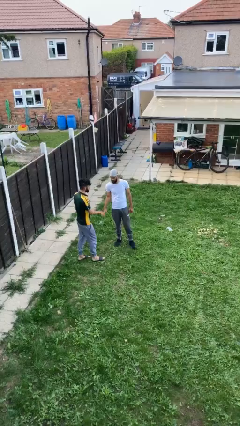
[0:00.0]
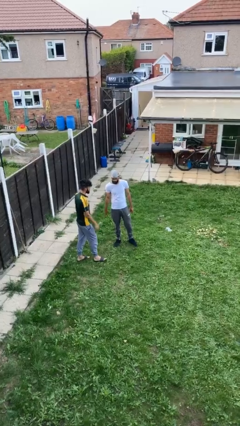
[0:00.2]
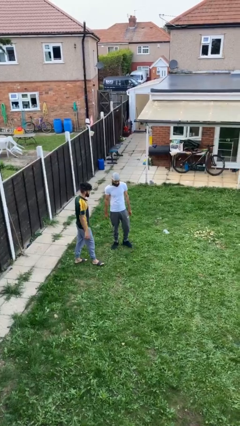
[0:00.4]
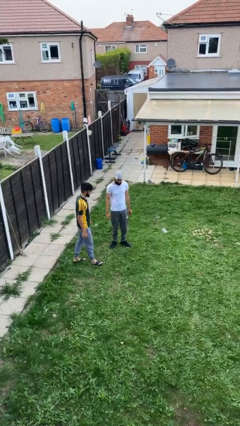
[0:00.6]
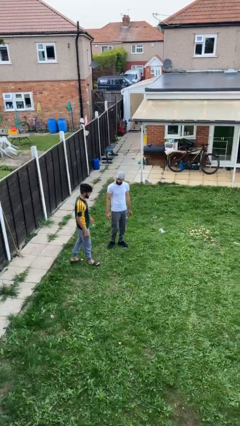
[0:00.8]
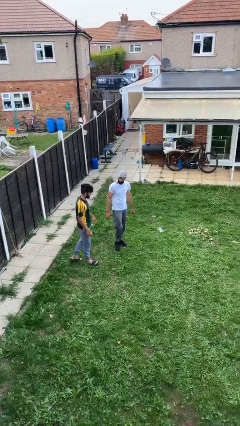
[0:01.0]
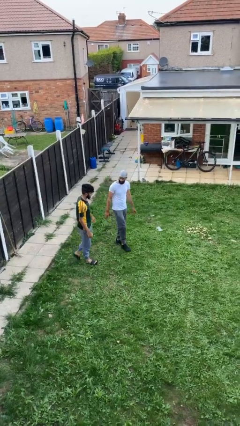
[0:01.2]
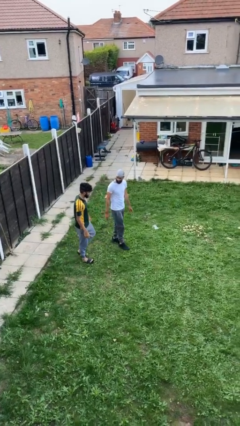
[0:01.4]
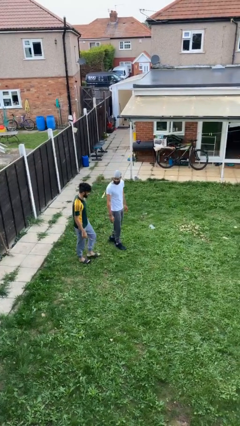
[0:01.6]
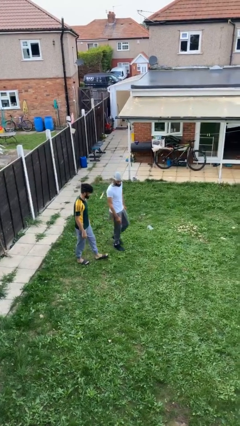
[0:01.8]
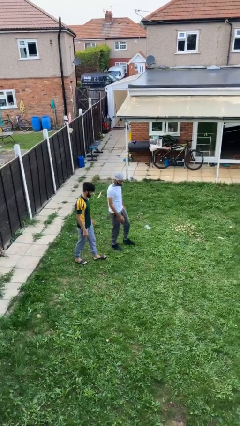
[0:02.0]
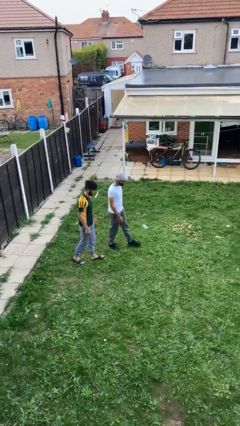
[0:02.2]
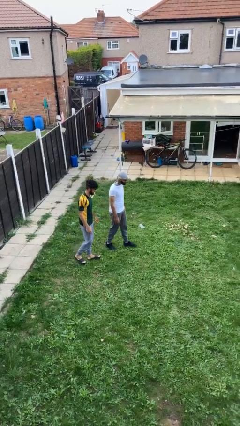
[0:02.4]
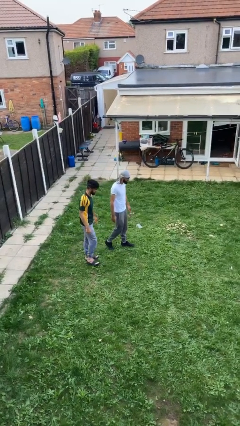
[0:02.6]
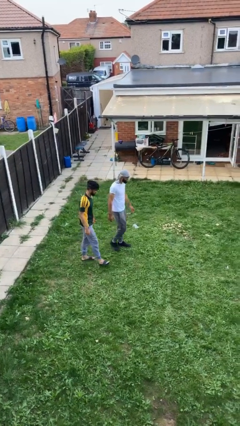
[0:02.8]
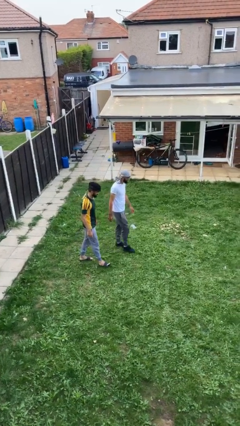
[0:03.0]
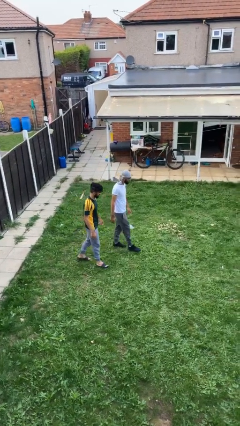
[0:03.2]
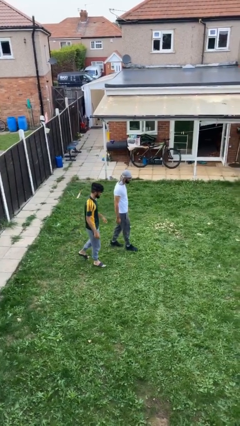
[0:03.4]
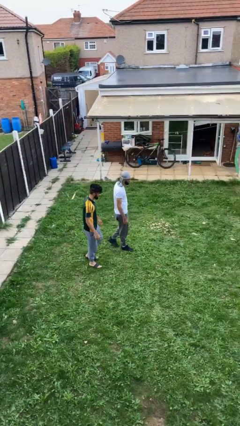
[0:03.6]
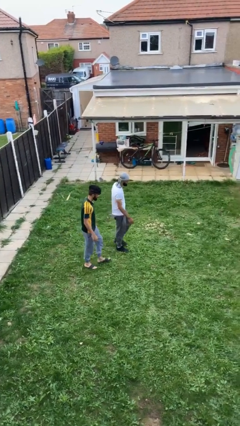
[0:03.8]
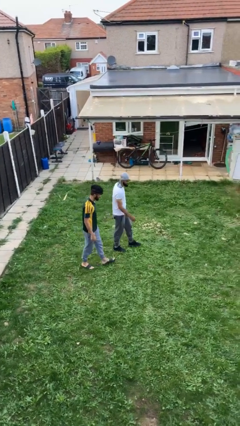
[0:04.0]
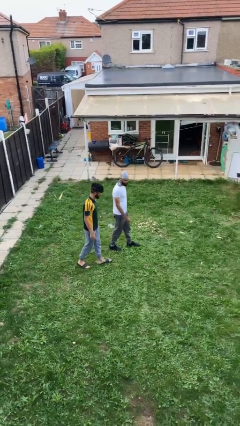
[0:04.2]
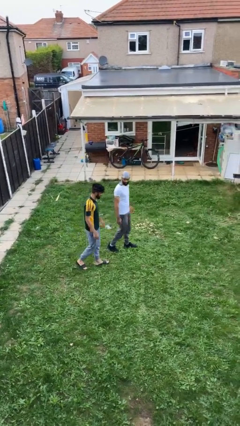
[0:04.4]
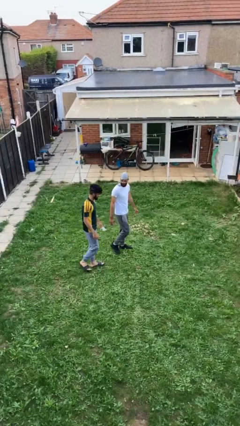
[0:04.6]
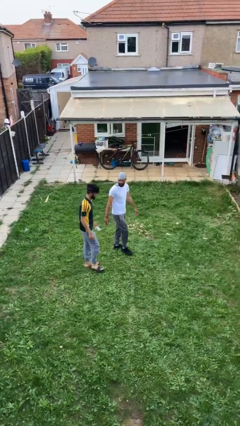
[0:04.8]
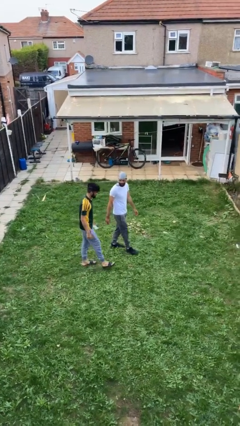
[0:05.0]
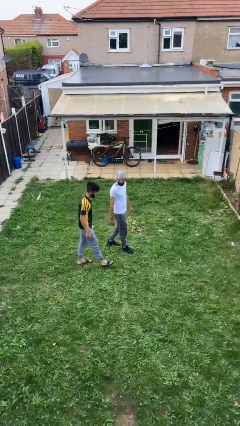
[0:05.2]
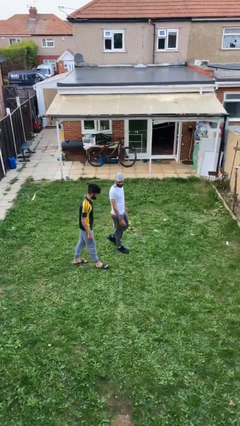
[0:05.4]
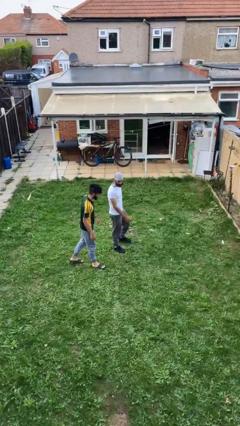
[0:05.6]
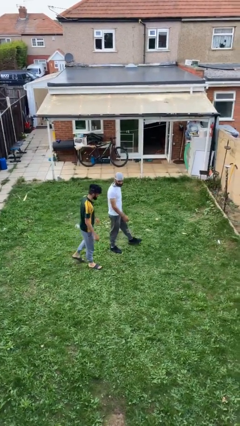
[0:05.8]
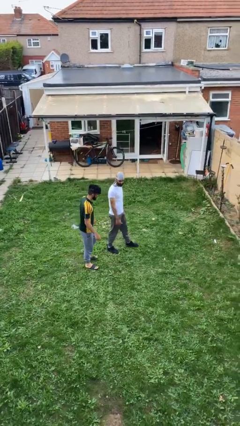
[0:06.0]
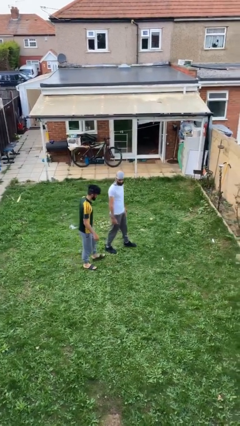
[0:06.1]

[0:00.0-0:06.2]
person talks to person

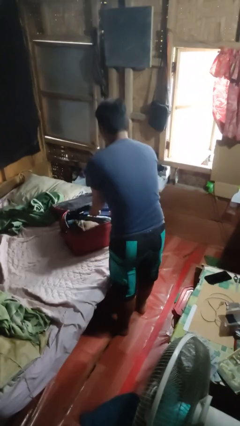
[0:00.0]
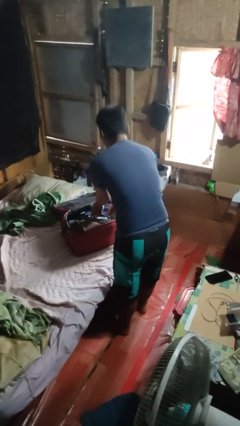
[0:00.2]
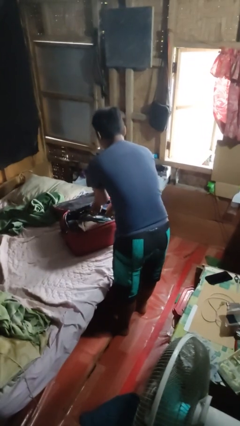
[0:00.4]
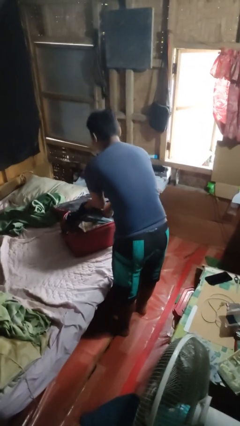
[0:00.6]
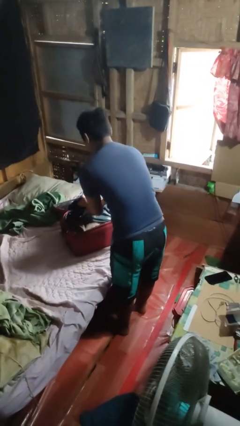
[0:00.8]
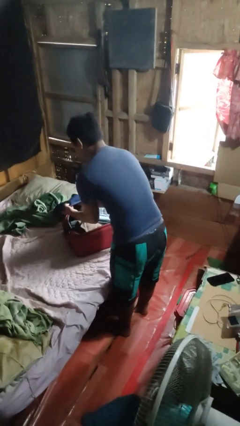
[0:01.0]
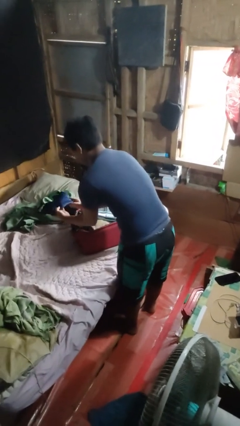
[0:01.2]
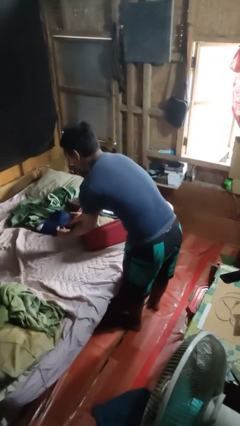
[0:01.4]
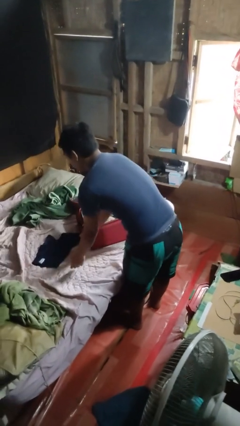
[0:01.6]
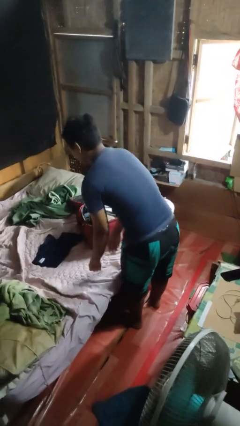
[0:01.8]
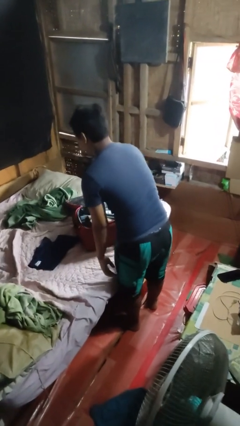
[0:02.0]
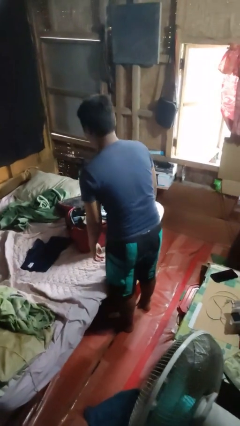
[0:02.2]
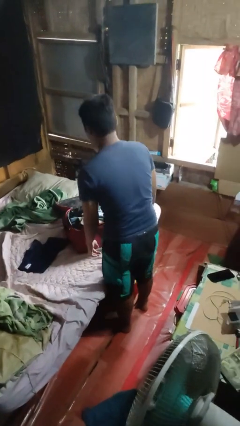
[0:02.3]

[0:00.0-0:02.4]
person unloads clothes from suitcase

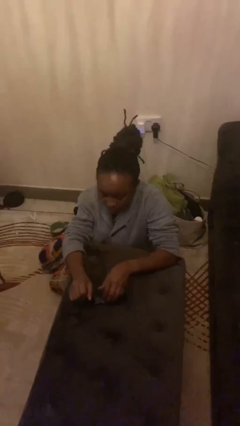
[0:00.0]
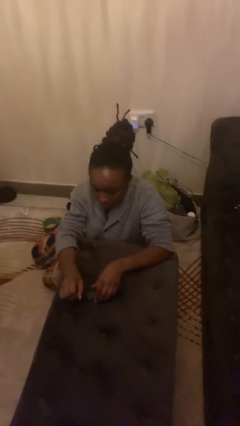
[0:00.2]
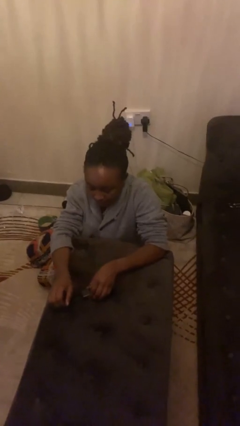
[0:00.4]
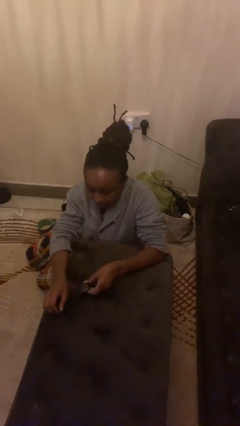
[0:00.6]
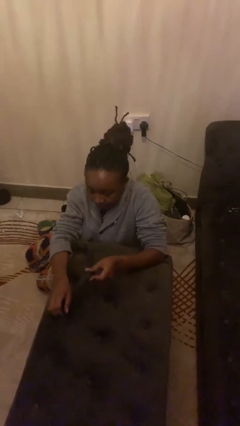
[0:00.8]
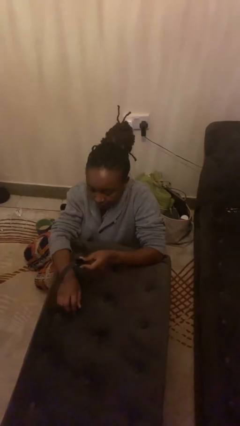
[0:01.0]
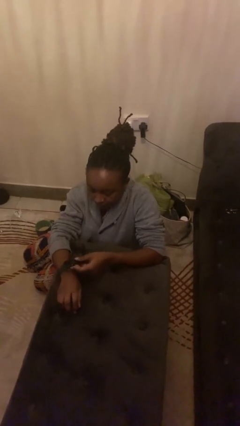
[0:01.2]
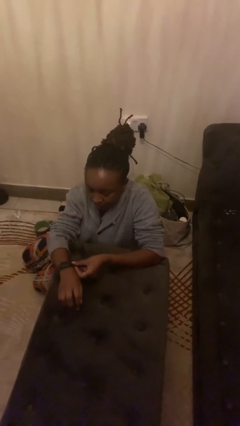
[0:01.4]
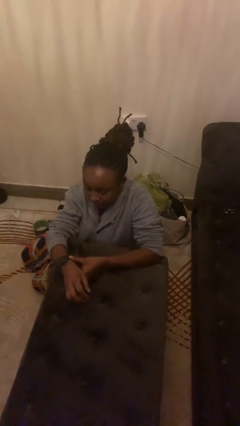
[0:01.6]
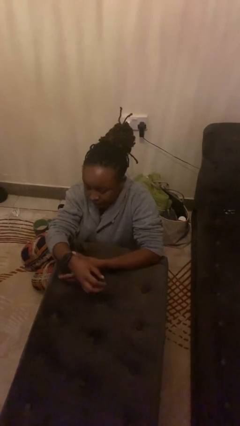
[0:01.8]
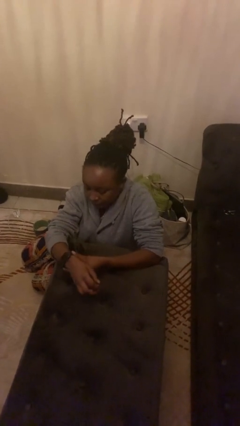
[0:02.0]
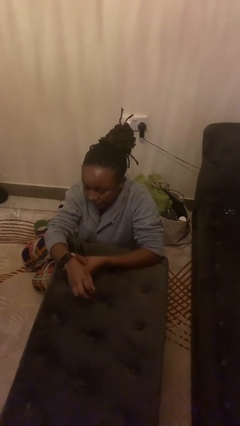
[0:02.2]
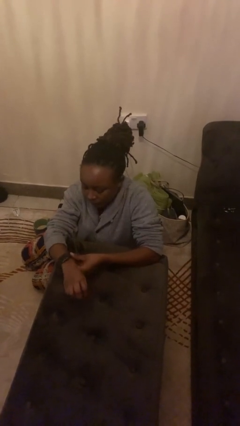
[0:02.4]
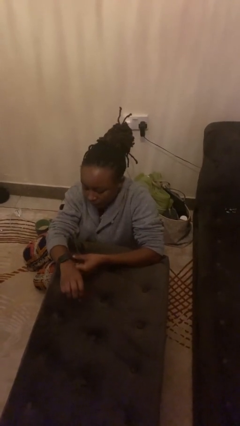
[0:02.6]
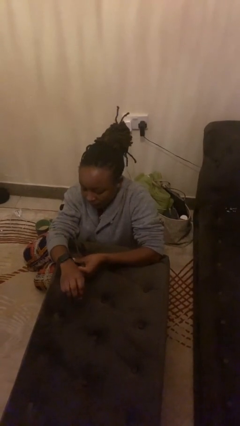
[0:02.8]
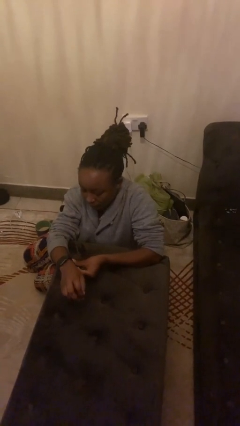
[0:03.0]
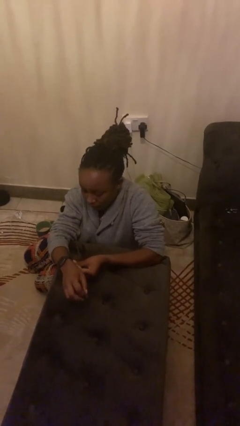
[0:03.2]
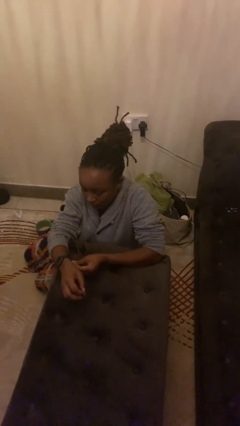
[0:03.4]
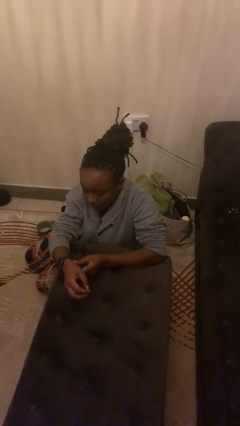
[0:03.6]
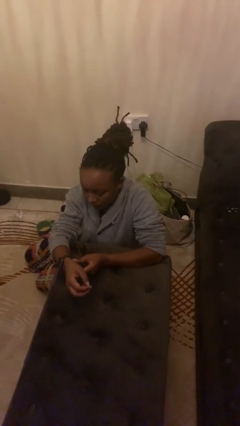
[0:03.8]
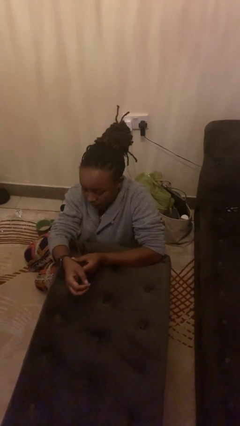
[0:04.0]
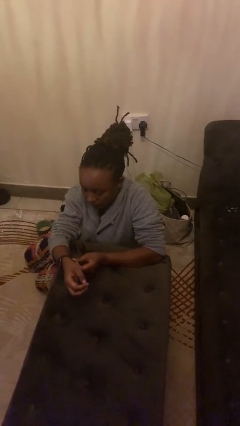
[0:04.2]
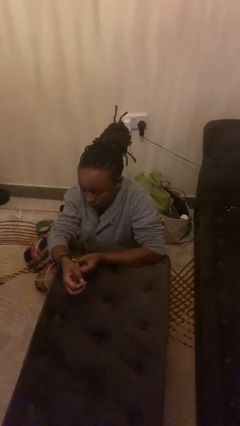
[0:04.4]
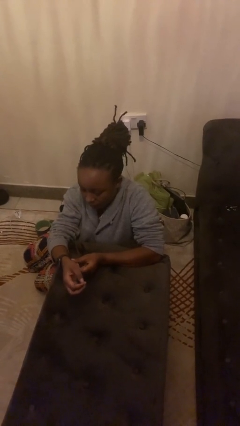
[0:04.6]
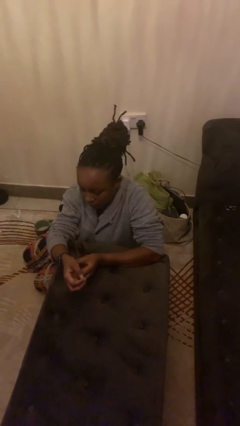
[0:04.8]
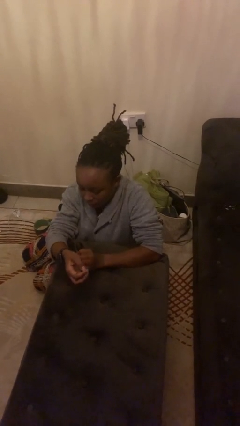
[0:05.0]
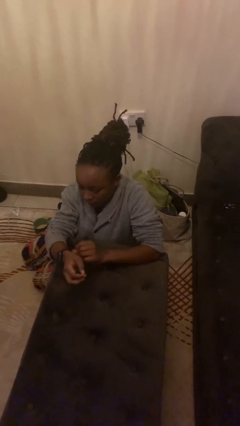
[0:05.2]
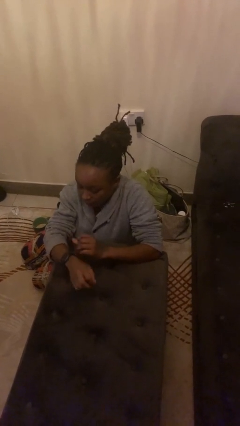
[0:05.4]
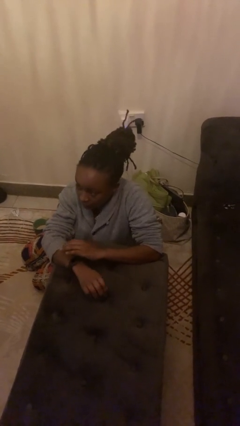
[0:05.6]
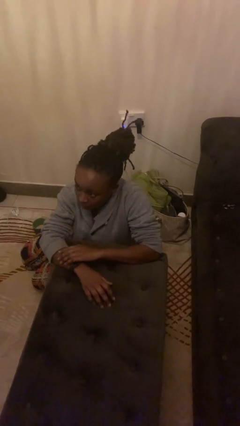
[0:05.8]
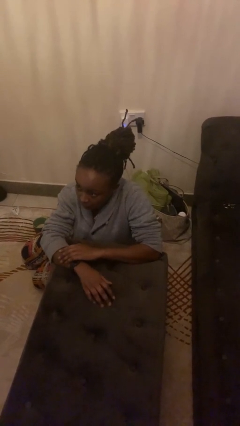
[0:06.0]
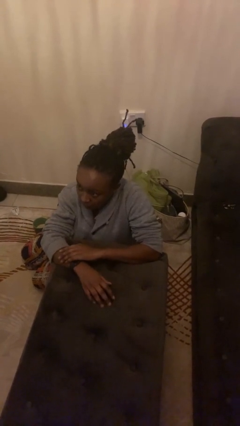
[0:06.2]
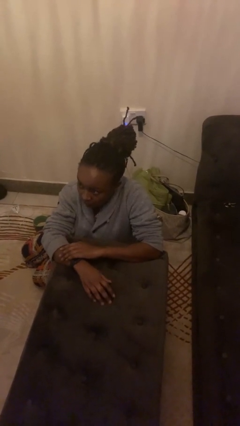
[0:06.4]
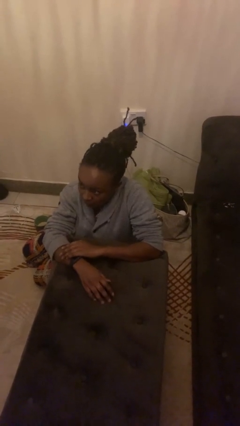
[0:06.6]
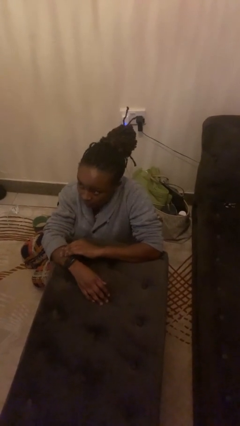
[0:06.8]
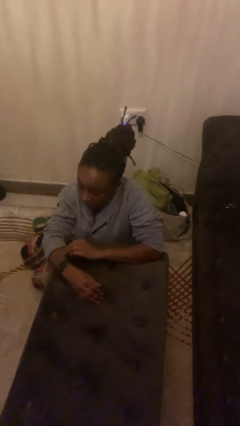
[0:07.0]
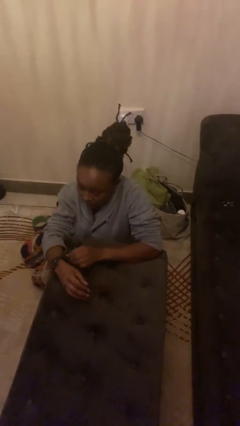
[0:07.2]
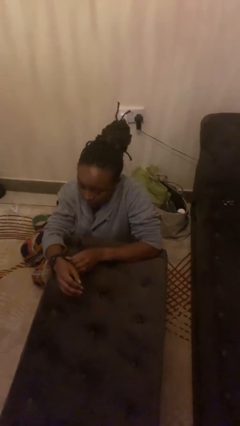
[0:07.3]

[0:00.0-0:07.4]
person puts on wristwatch

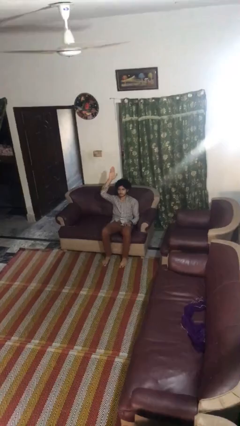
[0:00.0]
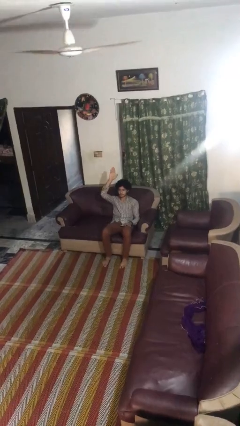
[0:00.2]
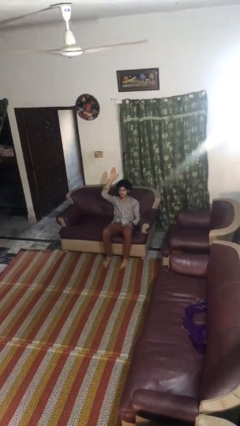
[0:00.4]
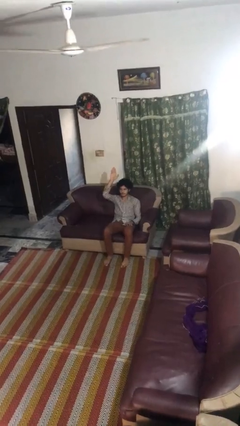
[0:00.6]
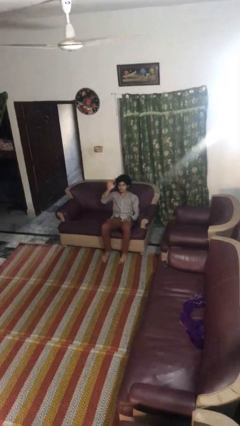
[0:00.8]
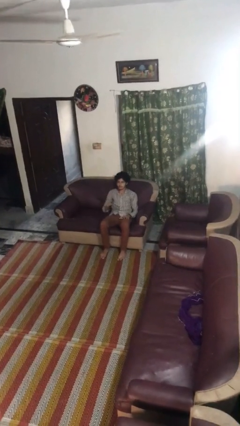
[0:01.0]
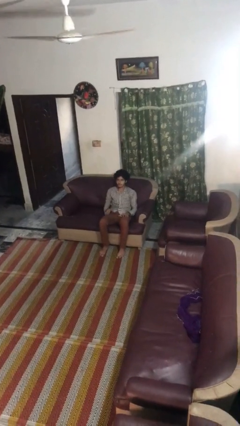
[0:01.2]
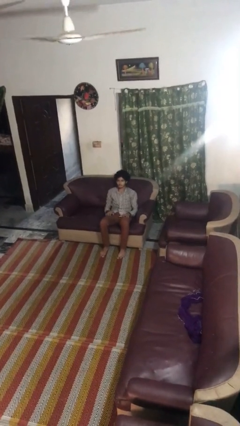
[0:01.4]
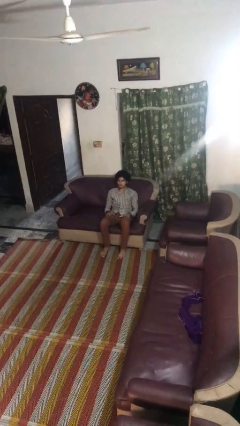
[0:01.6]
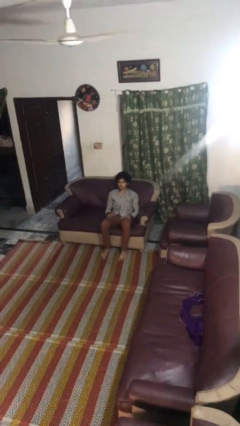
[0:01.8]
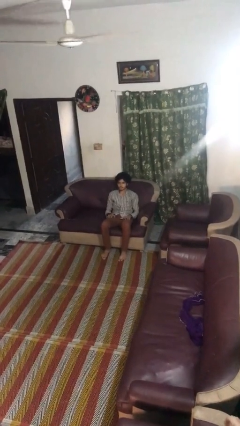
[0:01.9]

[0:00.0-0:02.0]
person gestures lower hand
